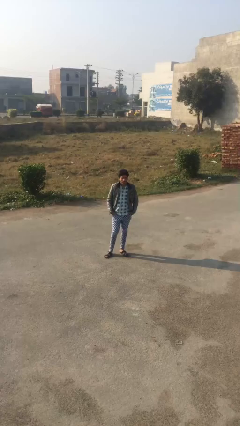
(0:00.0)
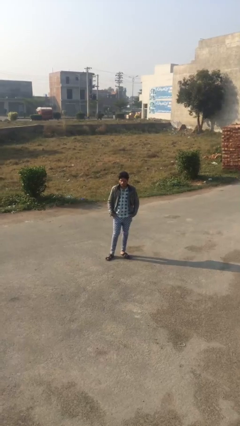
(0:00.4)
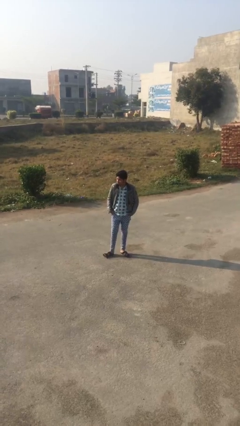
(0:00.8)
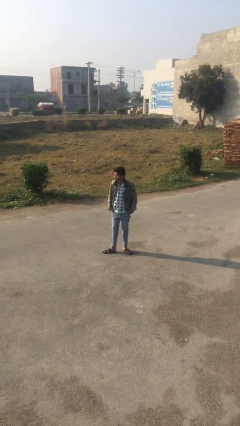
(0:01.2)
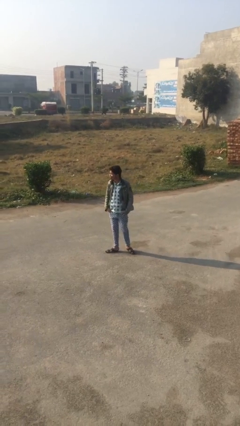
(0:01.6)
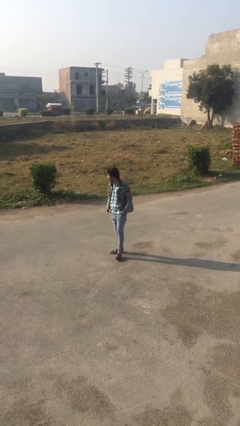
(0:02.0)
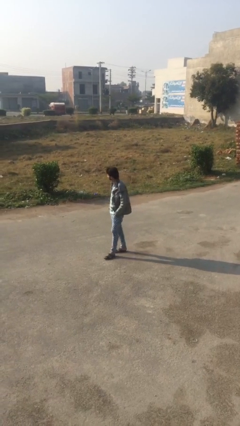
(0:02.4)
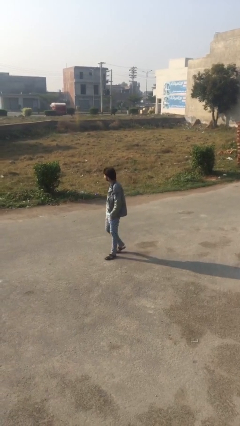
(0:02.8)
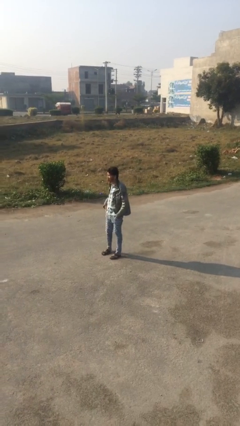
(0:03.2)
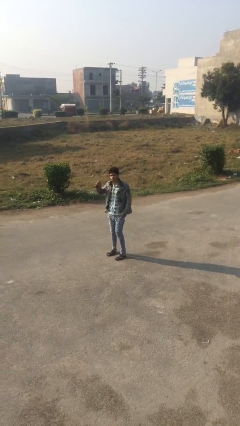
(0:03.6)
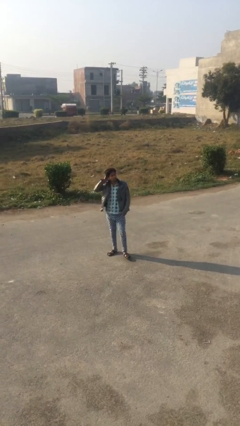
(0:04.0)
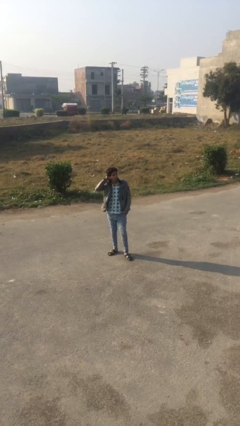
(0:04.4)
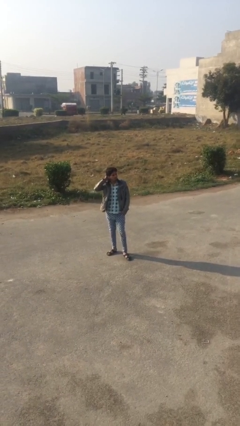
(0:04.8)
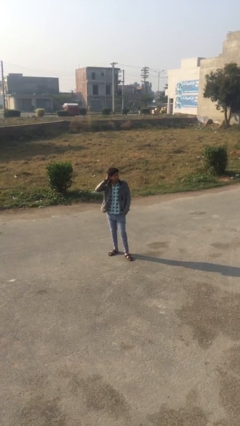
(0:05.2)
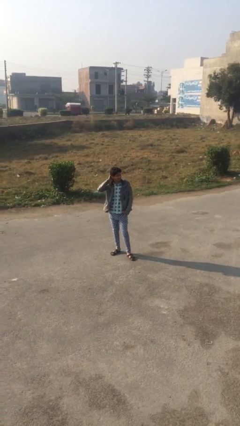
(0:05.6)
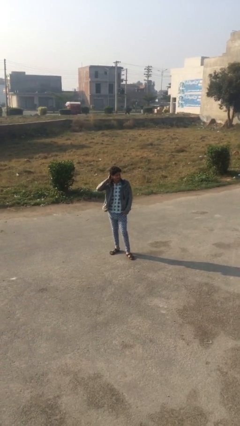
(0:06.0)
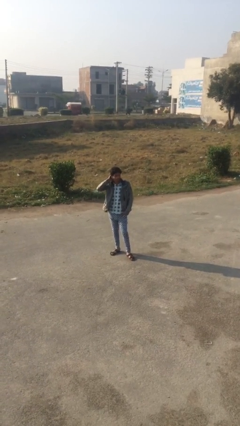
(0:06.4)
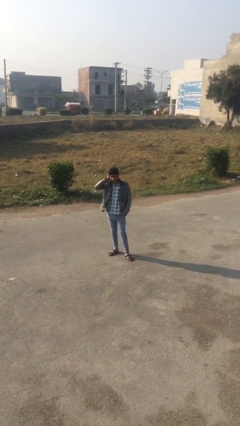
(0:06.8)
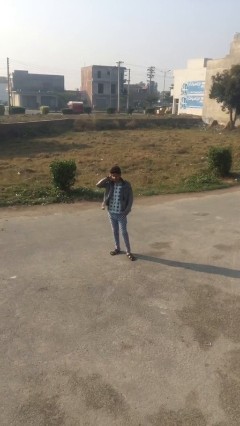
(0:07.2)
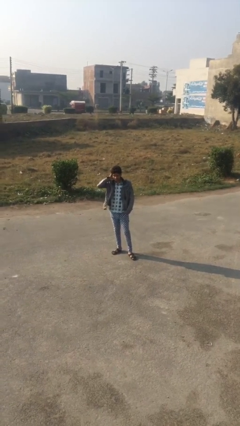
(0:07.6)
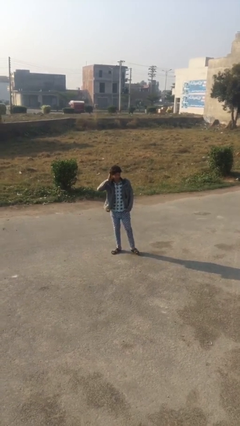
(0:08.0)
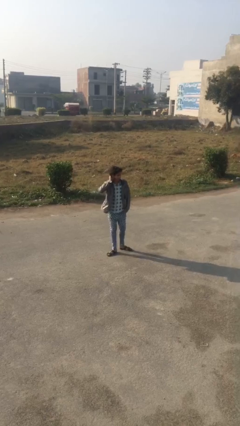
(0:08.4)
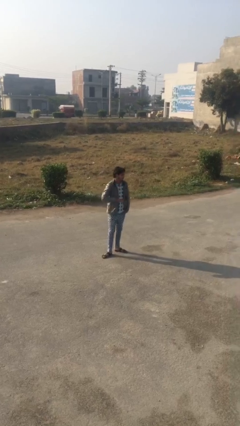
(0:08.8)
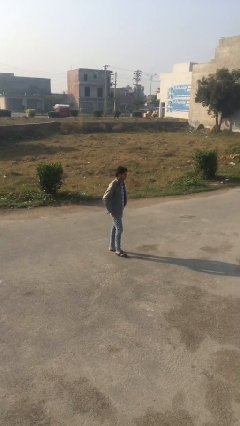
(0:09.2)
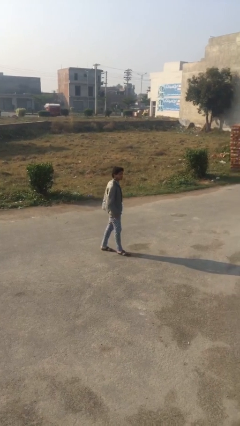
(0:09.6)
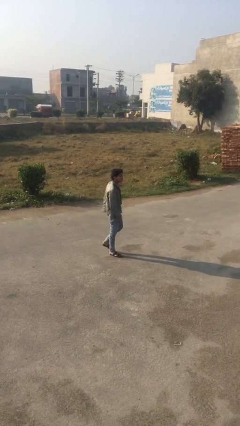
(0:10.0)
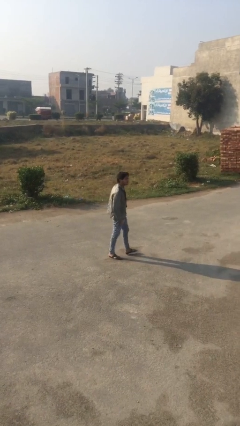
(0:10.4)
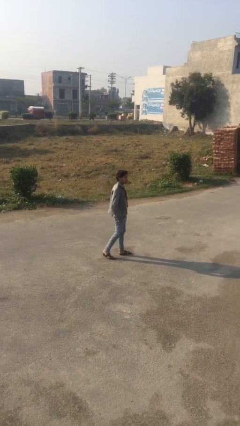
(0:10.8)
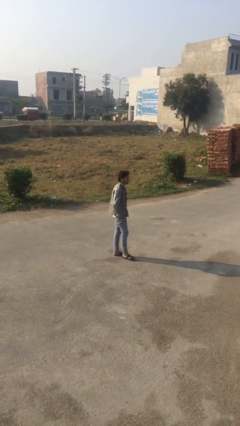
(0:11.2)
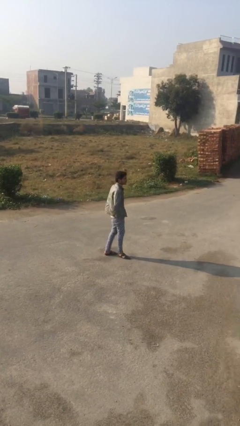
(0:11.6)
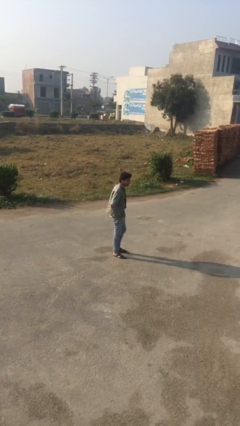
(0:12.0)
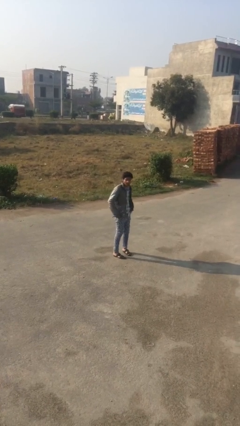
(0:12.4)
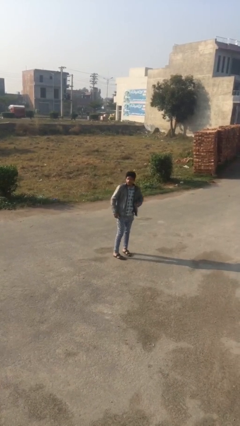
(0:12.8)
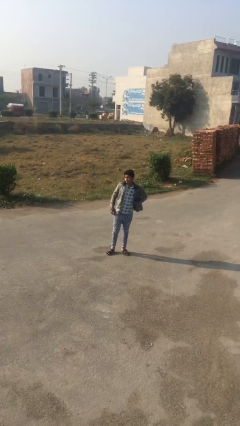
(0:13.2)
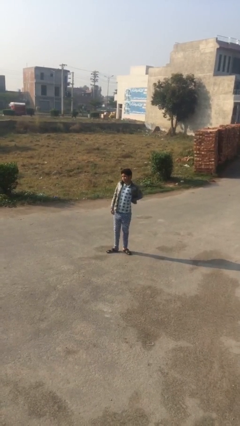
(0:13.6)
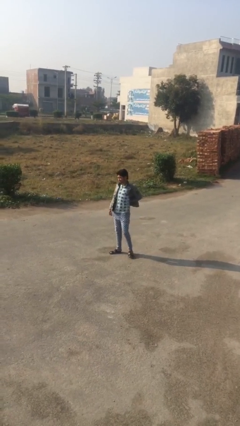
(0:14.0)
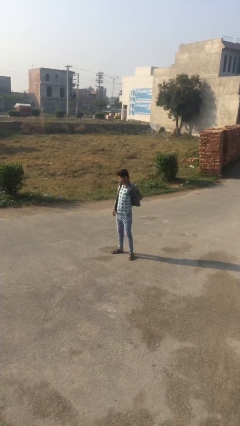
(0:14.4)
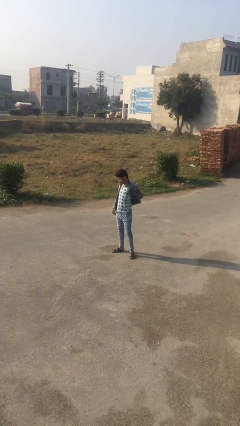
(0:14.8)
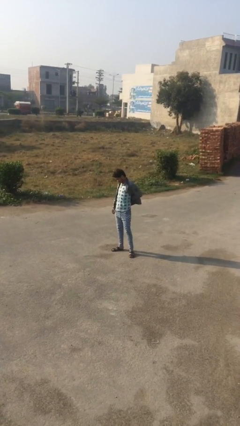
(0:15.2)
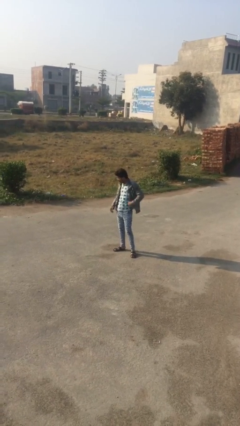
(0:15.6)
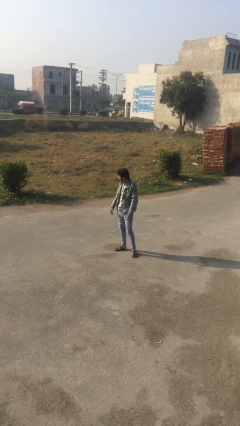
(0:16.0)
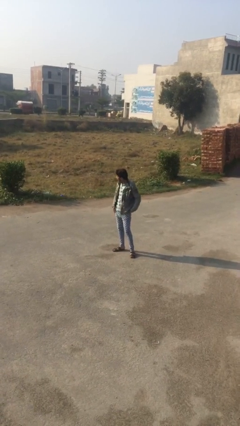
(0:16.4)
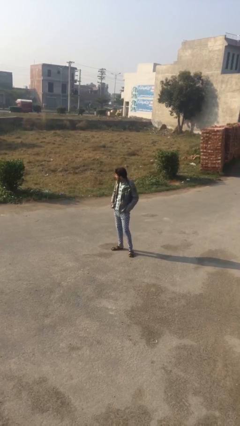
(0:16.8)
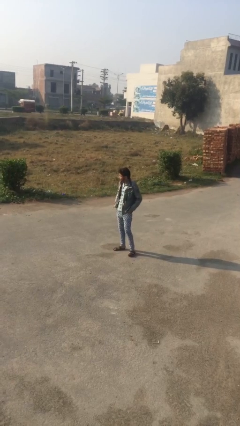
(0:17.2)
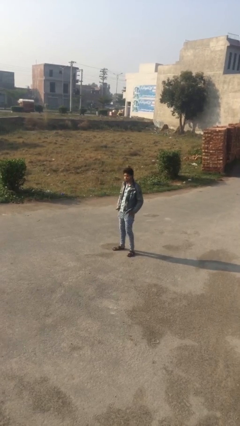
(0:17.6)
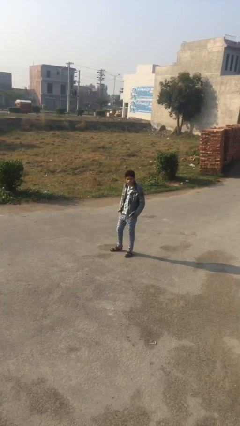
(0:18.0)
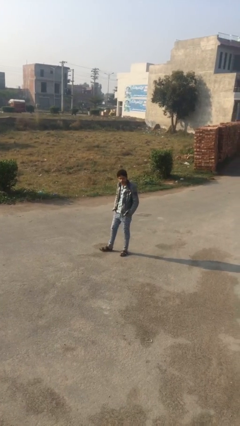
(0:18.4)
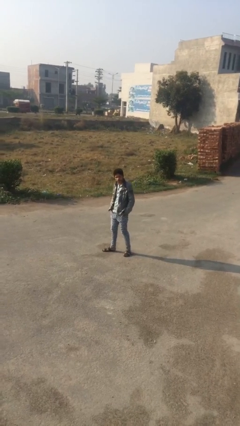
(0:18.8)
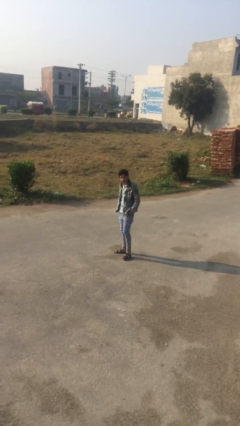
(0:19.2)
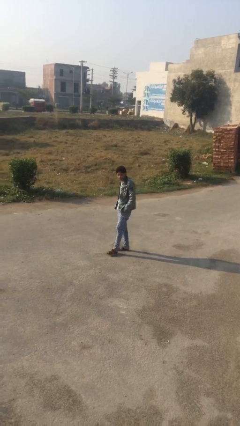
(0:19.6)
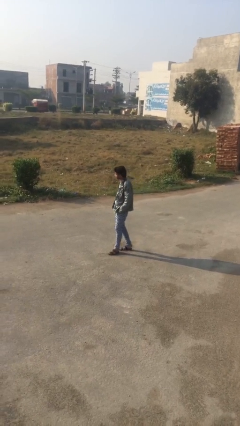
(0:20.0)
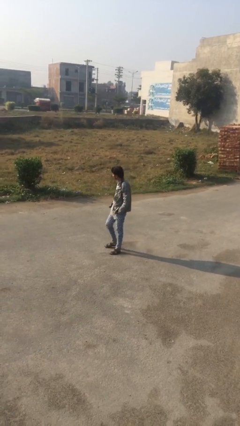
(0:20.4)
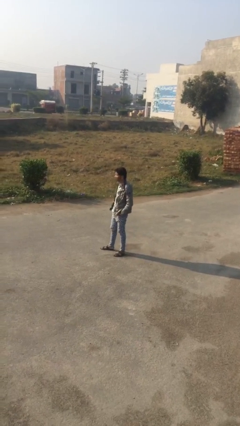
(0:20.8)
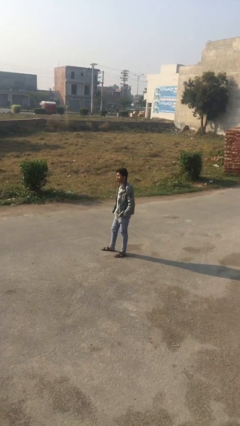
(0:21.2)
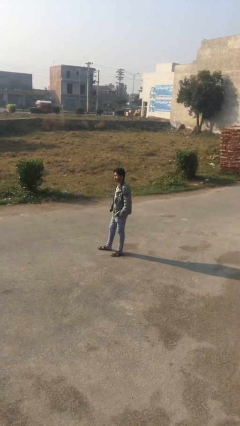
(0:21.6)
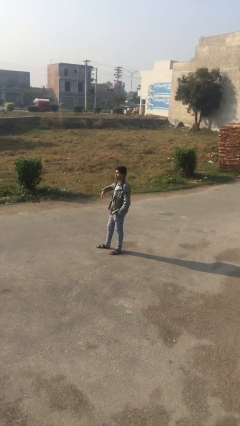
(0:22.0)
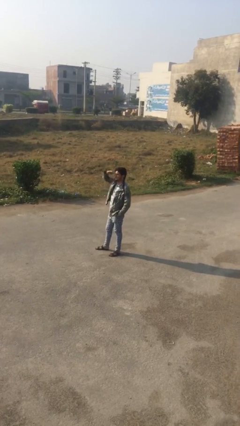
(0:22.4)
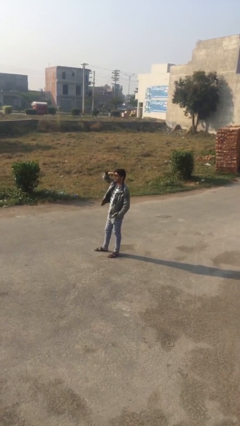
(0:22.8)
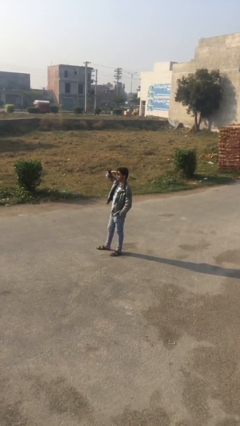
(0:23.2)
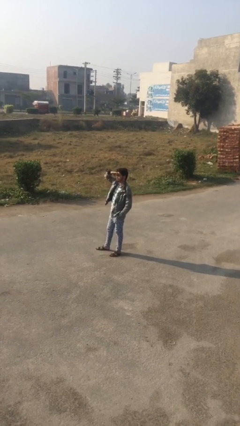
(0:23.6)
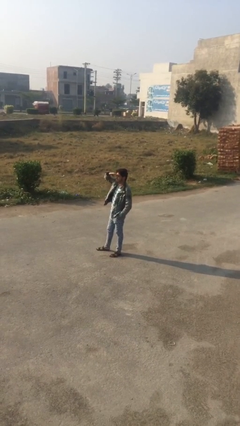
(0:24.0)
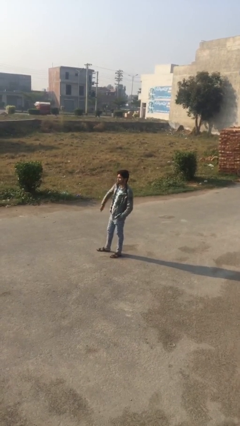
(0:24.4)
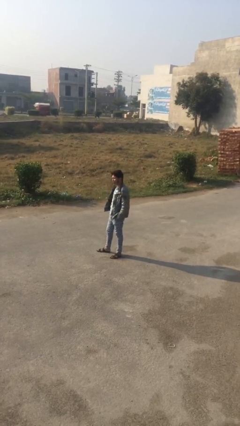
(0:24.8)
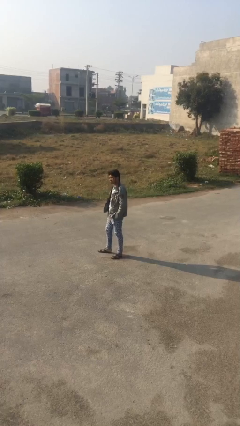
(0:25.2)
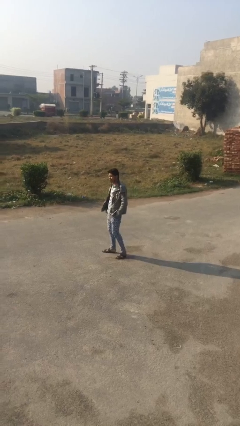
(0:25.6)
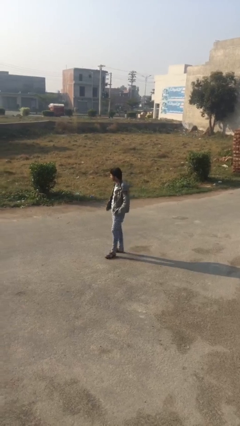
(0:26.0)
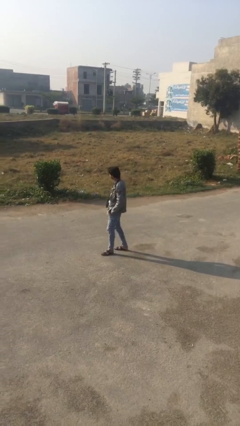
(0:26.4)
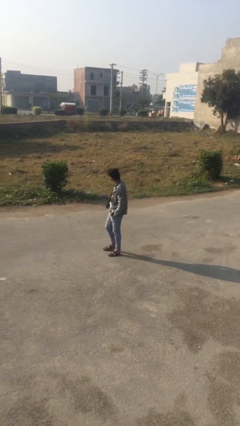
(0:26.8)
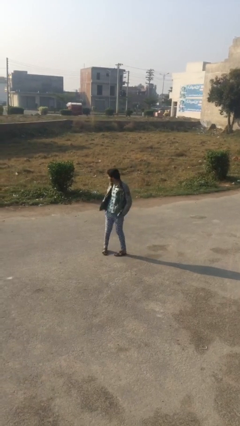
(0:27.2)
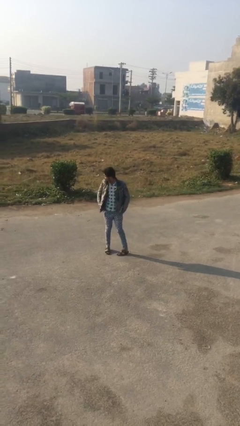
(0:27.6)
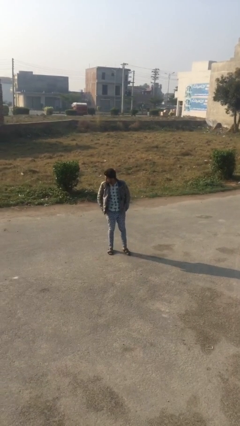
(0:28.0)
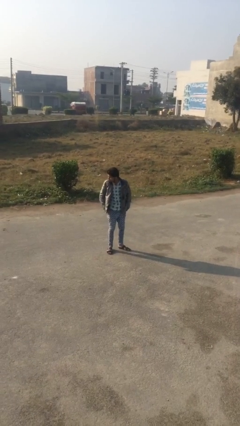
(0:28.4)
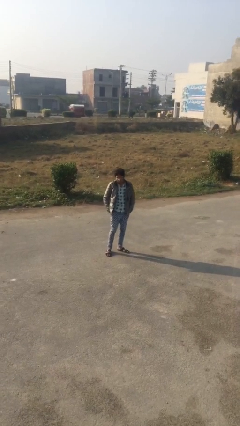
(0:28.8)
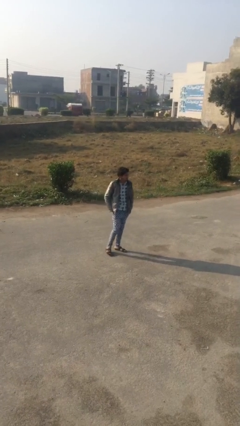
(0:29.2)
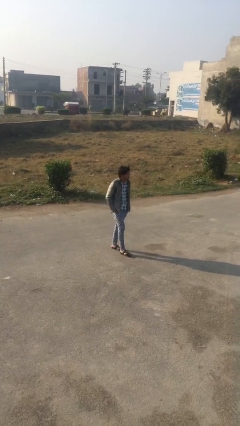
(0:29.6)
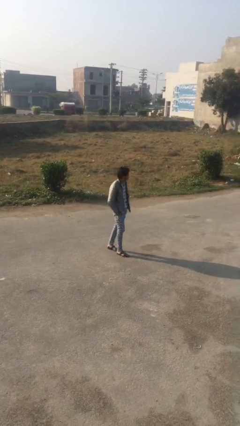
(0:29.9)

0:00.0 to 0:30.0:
person walks

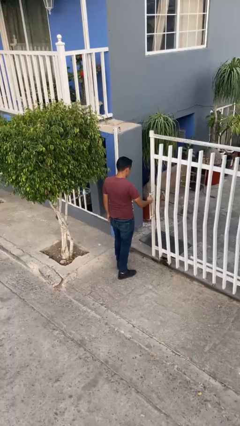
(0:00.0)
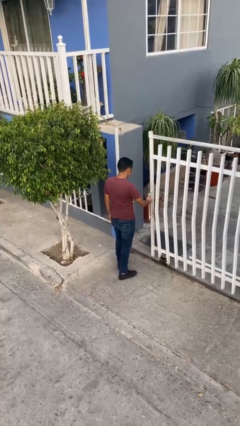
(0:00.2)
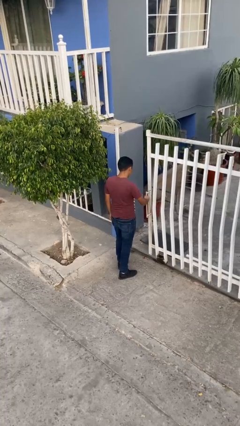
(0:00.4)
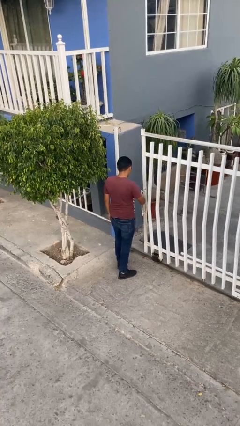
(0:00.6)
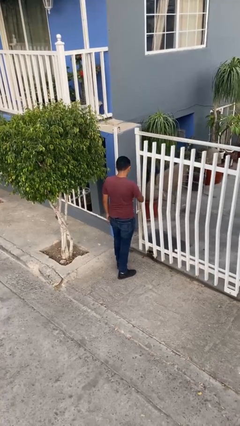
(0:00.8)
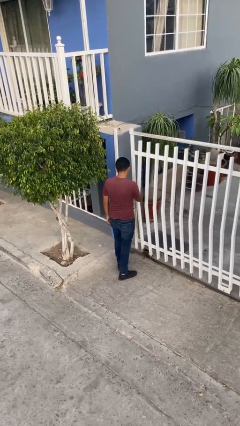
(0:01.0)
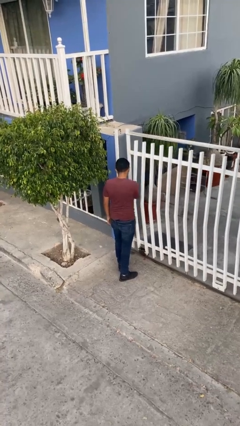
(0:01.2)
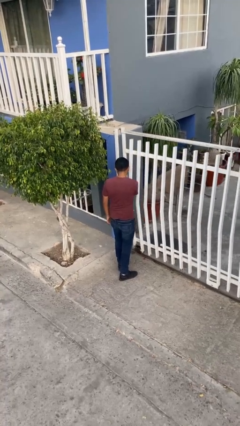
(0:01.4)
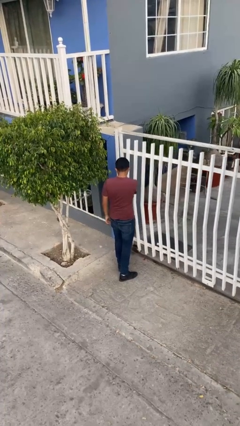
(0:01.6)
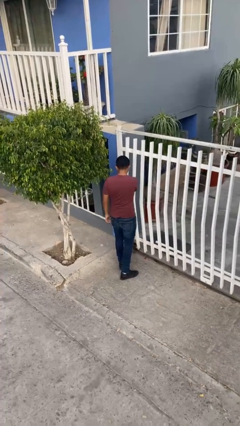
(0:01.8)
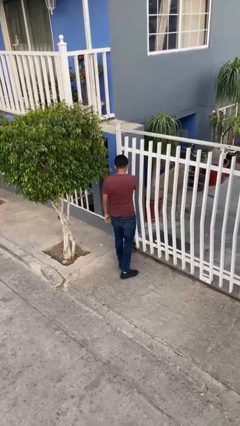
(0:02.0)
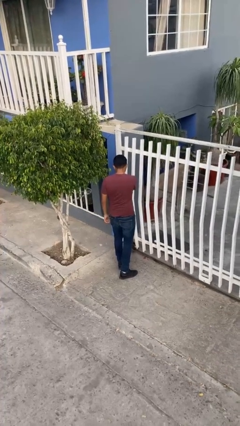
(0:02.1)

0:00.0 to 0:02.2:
person closes facility door

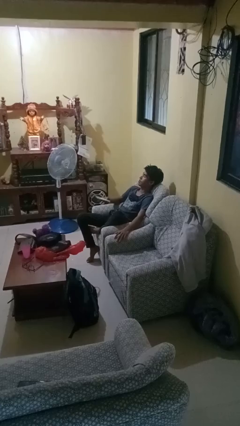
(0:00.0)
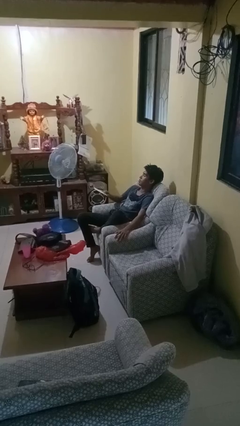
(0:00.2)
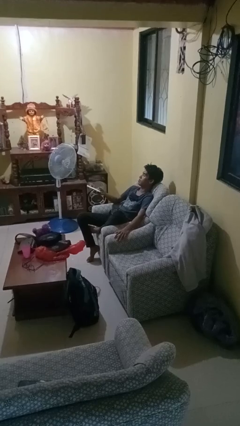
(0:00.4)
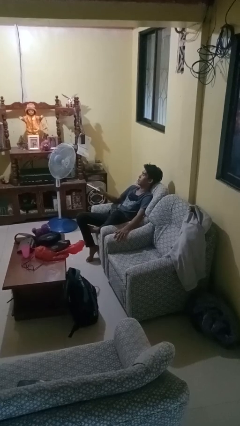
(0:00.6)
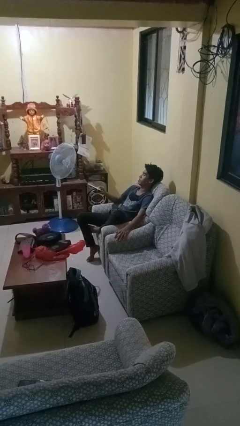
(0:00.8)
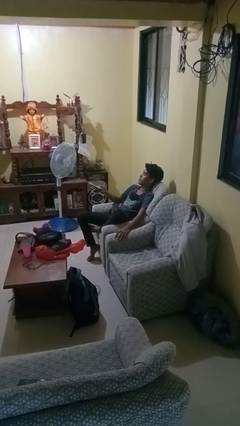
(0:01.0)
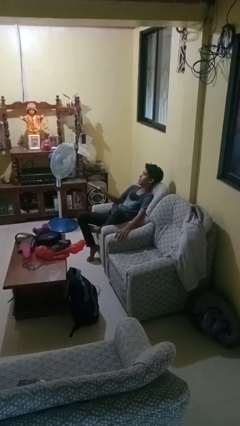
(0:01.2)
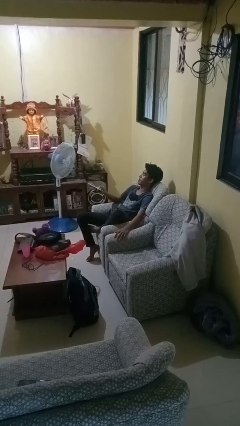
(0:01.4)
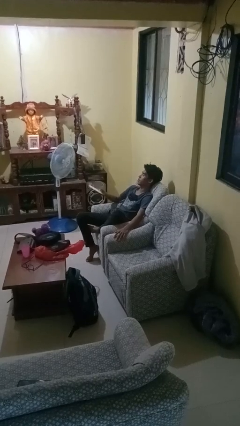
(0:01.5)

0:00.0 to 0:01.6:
person uses television remote
